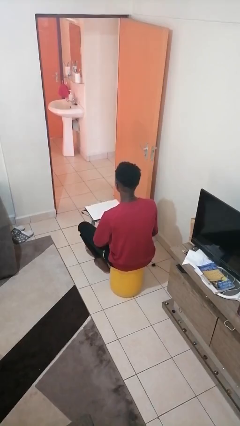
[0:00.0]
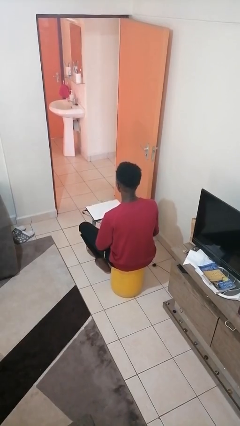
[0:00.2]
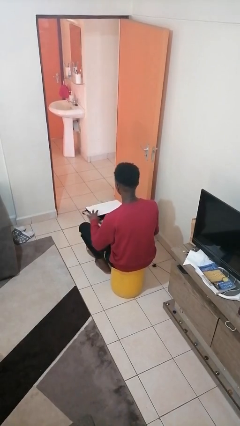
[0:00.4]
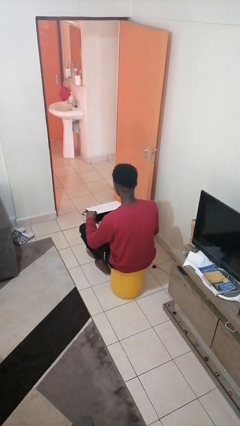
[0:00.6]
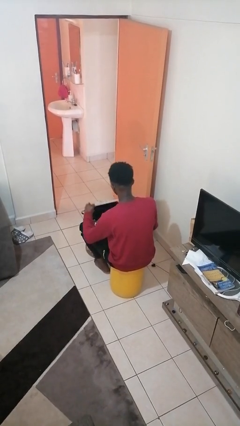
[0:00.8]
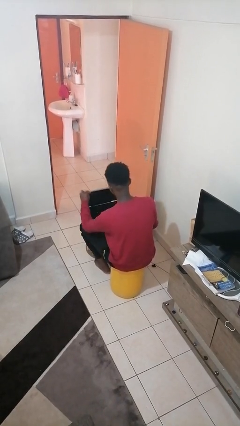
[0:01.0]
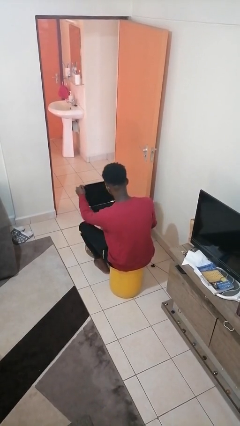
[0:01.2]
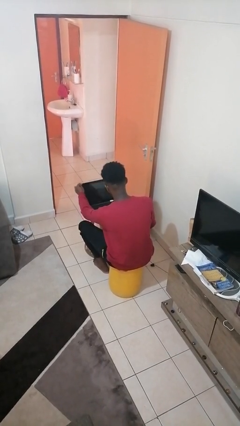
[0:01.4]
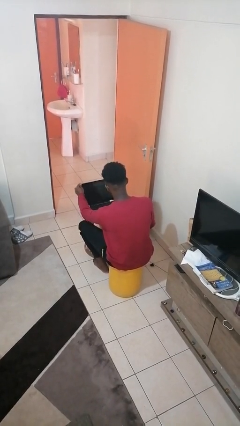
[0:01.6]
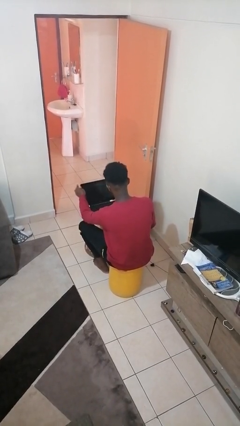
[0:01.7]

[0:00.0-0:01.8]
person opens laptop

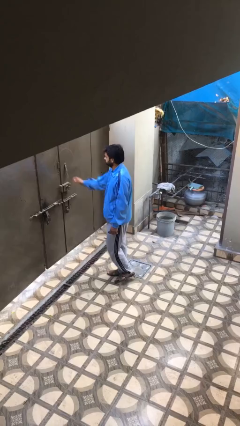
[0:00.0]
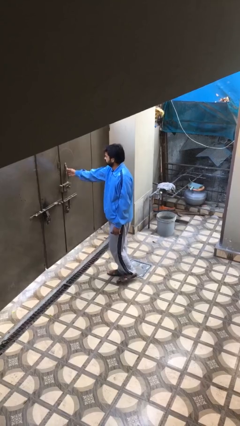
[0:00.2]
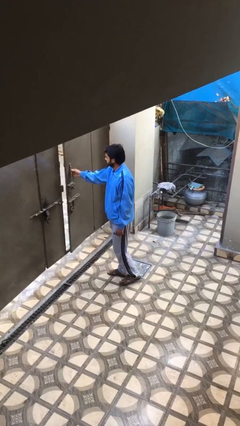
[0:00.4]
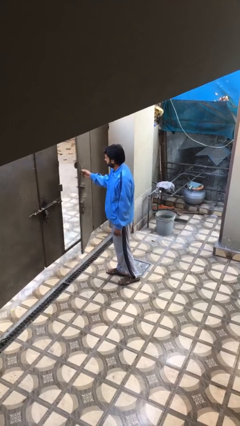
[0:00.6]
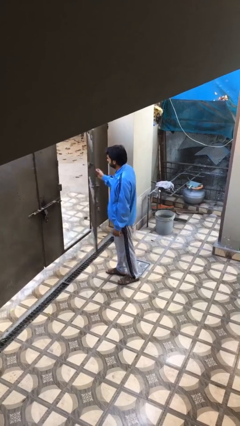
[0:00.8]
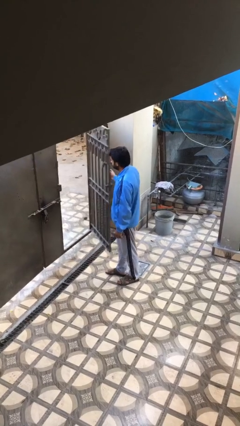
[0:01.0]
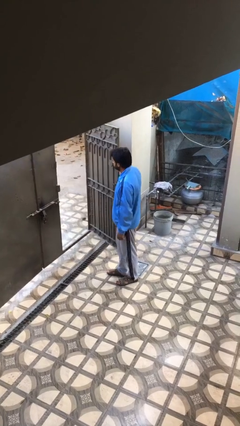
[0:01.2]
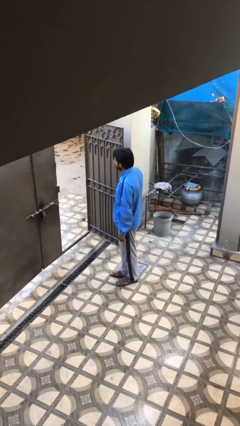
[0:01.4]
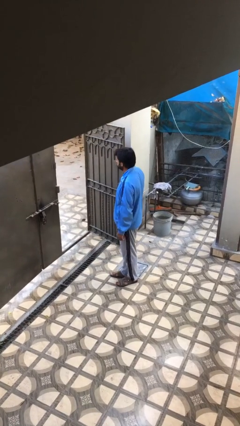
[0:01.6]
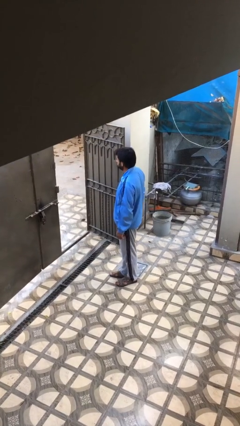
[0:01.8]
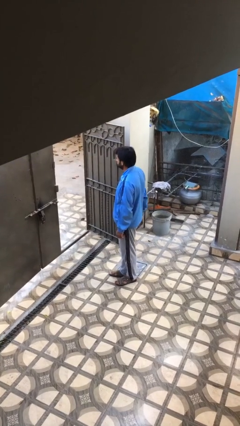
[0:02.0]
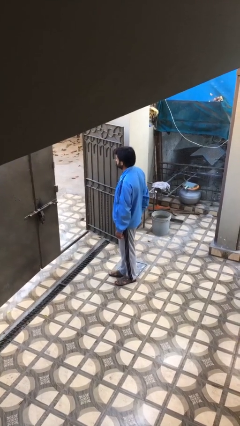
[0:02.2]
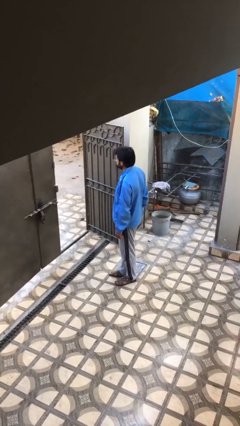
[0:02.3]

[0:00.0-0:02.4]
person opens facility door

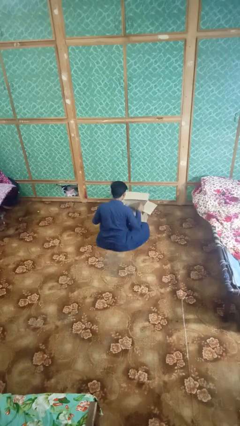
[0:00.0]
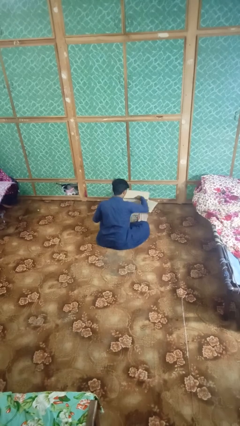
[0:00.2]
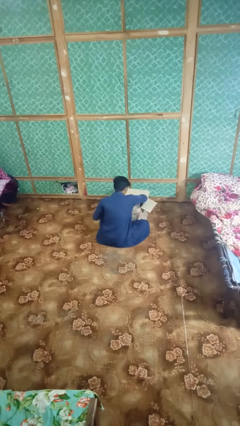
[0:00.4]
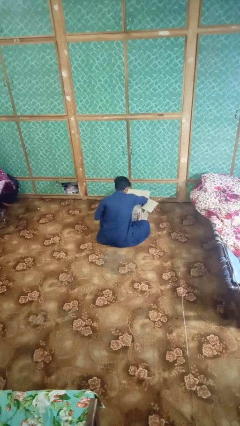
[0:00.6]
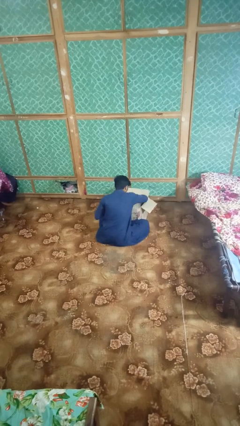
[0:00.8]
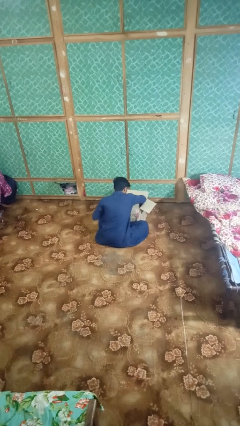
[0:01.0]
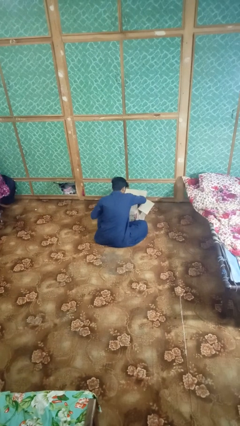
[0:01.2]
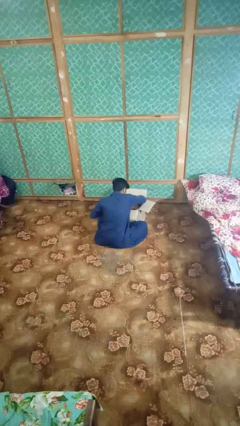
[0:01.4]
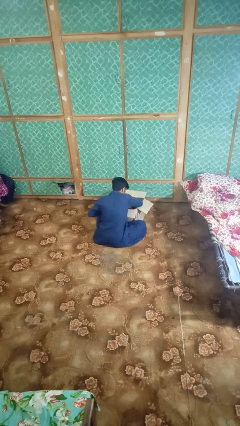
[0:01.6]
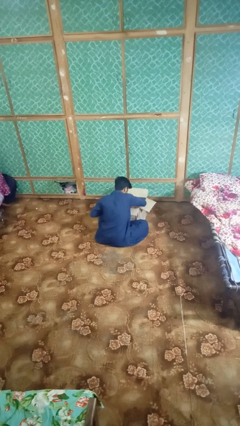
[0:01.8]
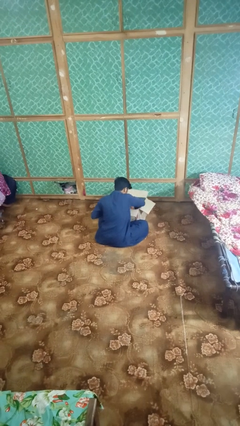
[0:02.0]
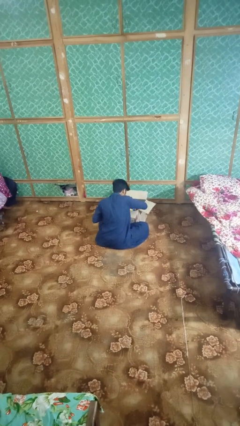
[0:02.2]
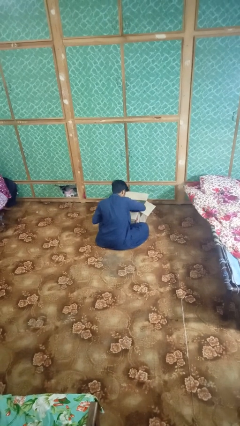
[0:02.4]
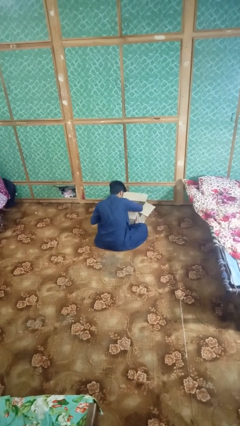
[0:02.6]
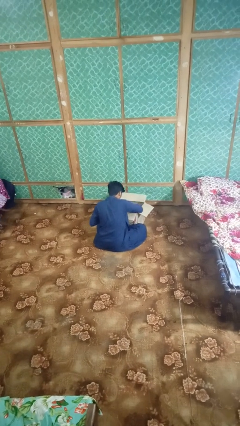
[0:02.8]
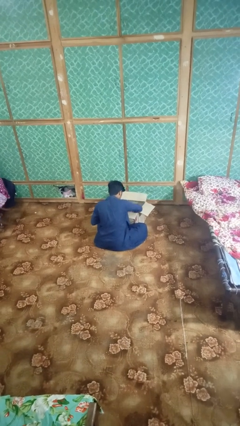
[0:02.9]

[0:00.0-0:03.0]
person searches in box

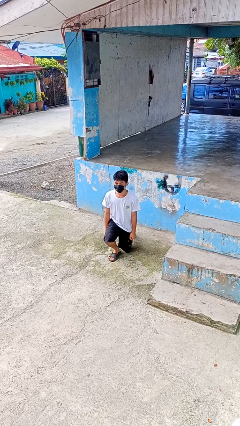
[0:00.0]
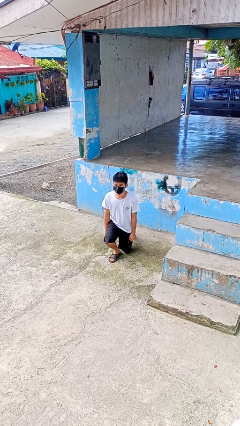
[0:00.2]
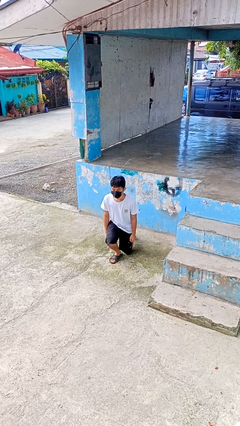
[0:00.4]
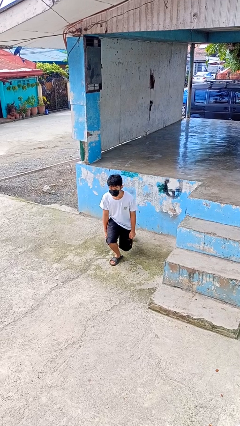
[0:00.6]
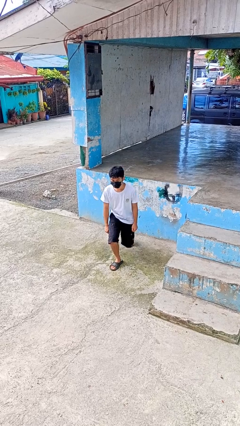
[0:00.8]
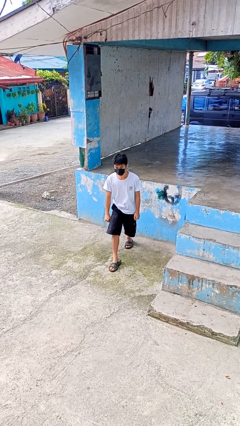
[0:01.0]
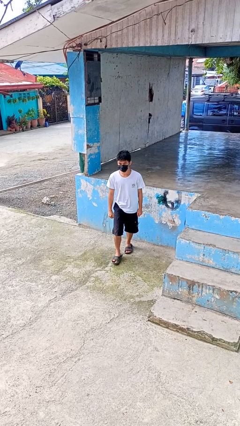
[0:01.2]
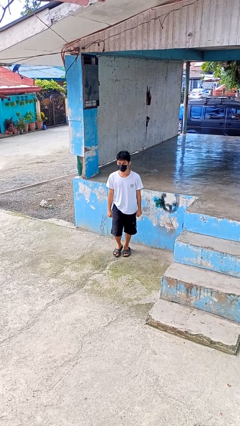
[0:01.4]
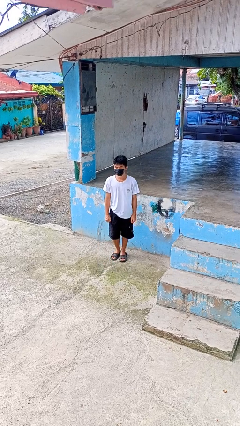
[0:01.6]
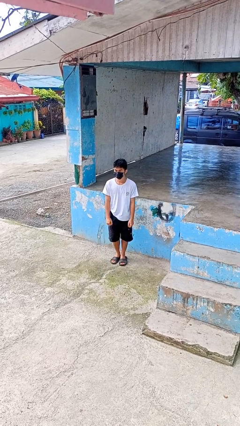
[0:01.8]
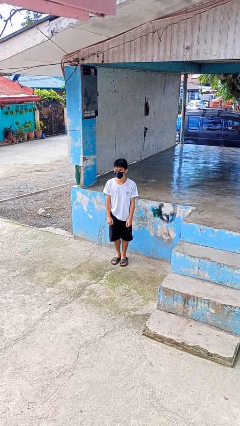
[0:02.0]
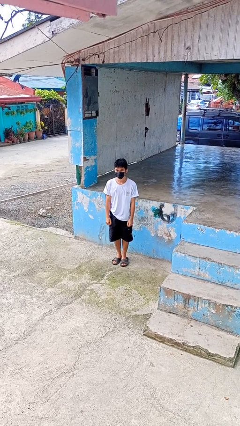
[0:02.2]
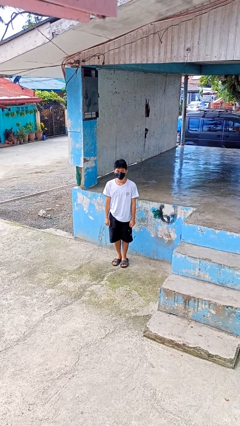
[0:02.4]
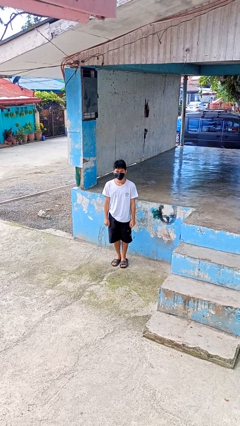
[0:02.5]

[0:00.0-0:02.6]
person stands up from floor

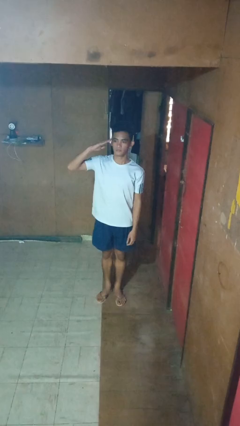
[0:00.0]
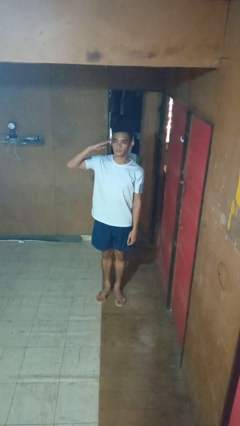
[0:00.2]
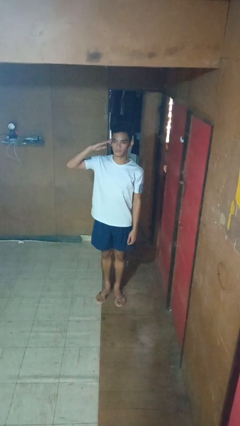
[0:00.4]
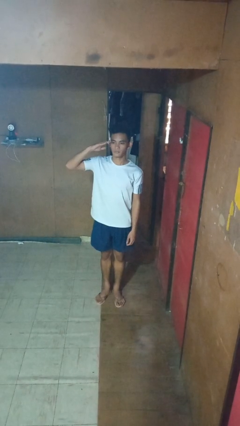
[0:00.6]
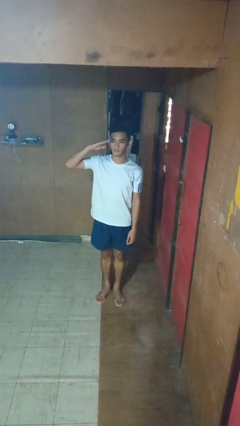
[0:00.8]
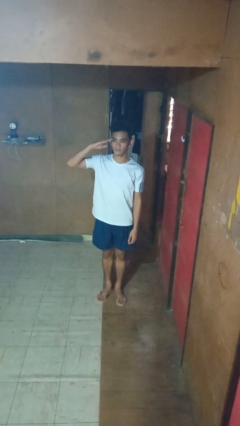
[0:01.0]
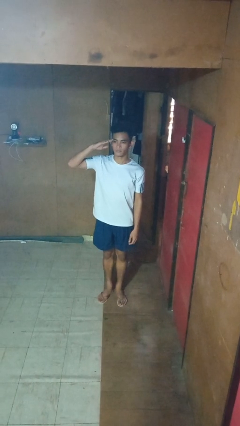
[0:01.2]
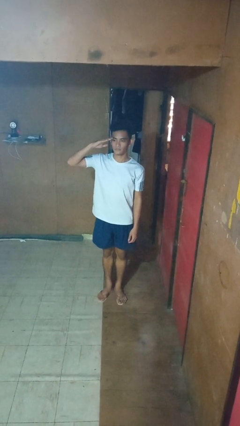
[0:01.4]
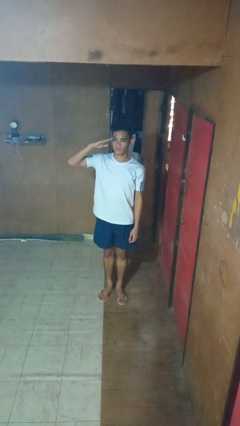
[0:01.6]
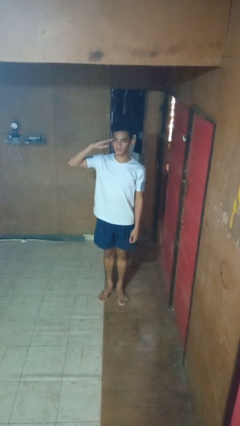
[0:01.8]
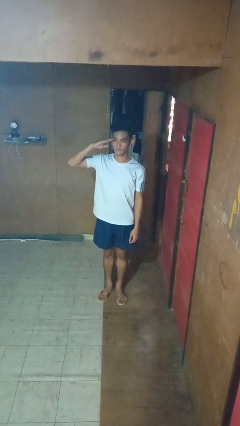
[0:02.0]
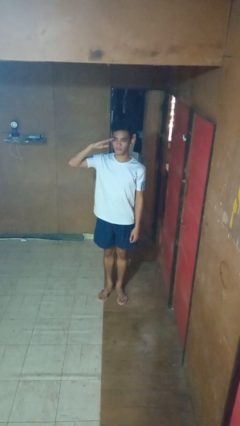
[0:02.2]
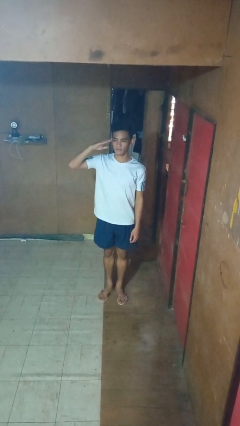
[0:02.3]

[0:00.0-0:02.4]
person salutes

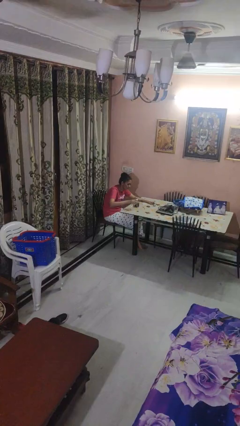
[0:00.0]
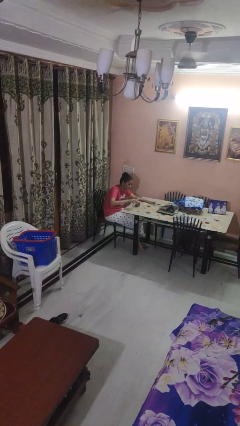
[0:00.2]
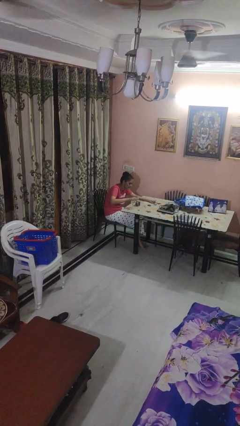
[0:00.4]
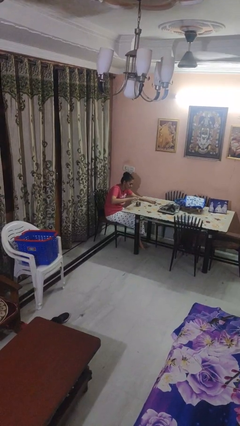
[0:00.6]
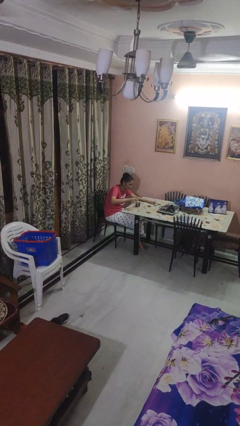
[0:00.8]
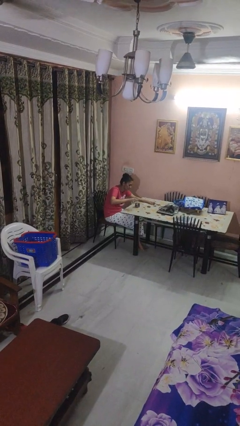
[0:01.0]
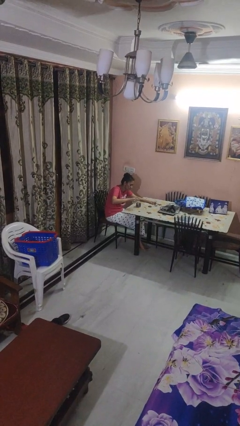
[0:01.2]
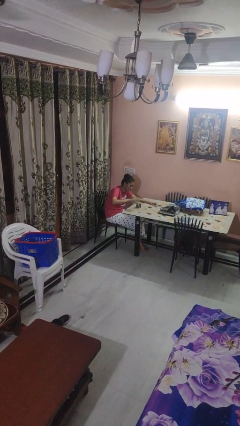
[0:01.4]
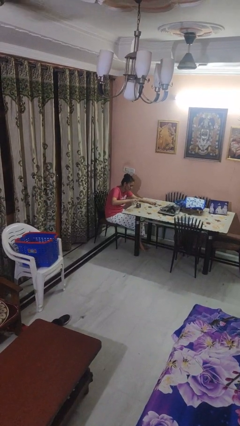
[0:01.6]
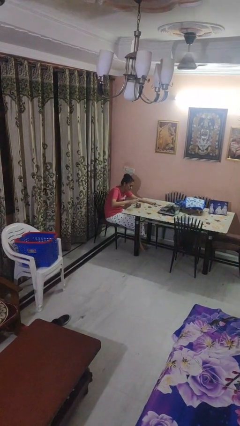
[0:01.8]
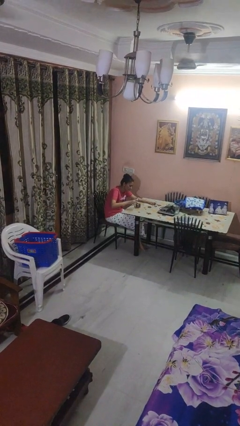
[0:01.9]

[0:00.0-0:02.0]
person pours liquid into cup

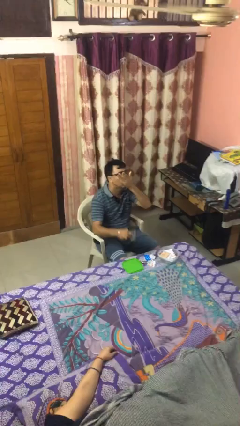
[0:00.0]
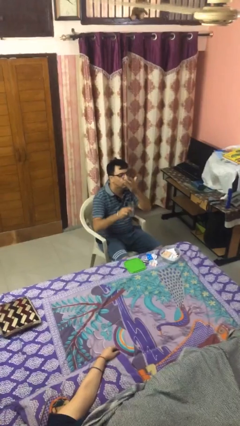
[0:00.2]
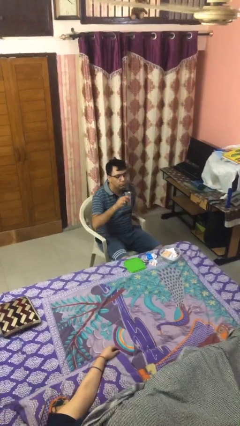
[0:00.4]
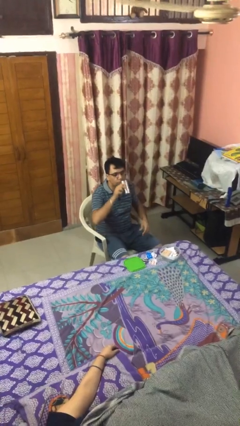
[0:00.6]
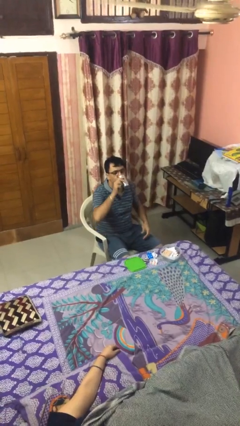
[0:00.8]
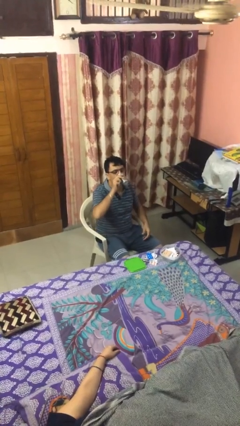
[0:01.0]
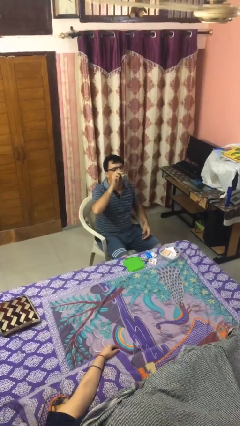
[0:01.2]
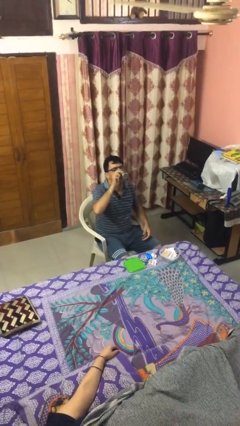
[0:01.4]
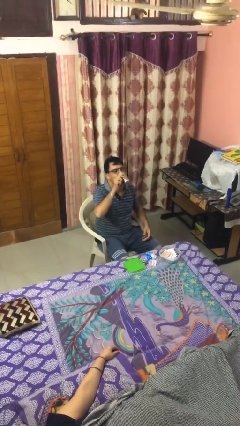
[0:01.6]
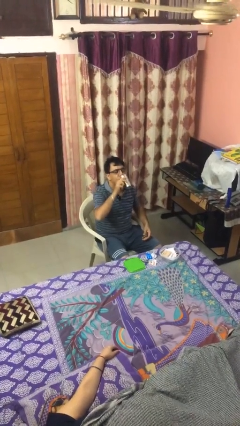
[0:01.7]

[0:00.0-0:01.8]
person drinks from cup

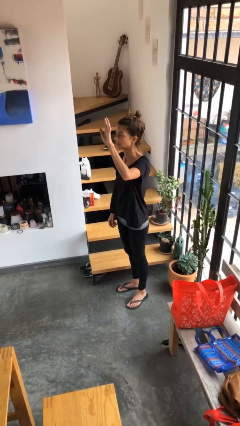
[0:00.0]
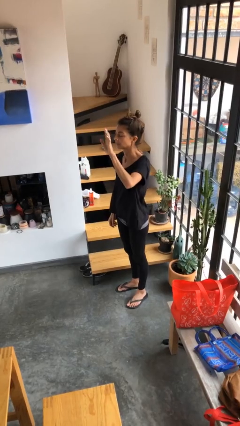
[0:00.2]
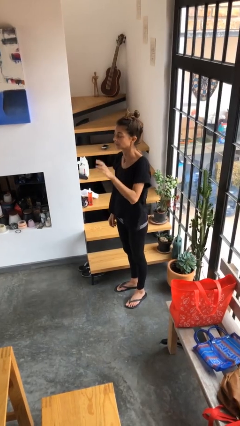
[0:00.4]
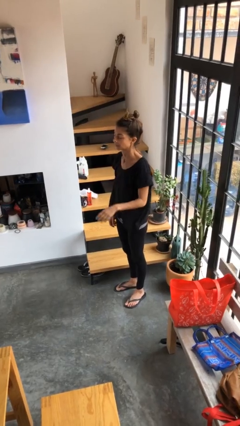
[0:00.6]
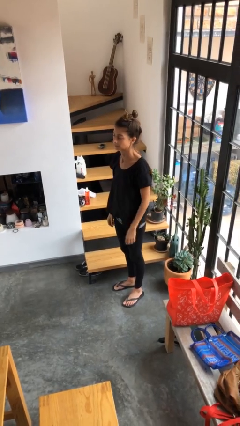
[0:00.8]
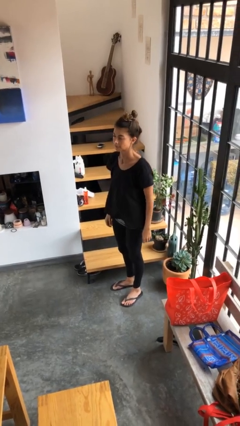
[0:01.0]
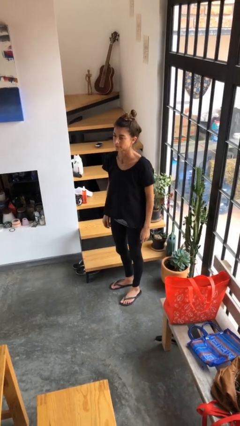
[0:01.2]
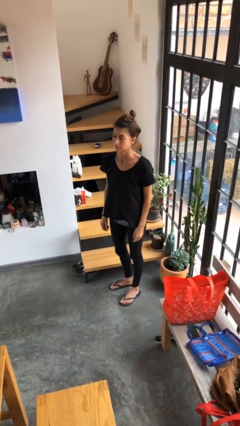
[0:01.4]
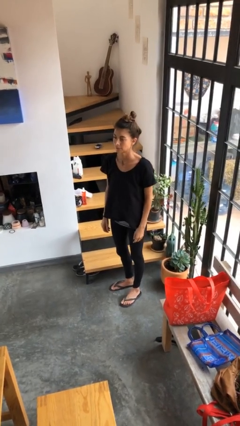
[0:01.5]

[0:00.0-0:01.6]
person gestures lower hand
